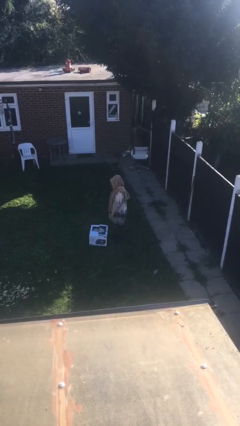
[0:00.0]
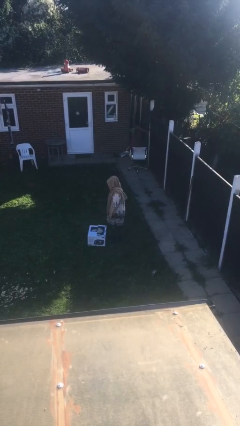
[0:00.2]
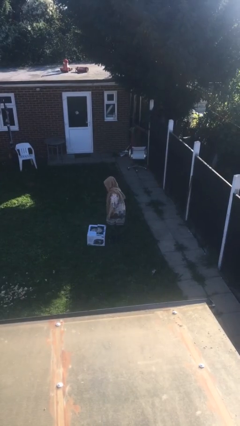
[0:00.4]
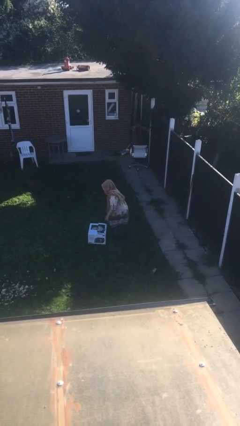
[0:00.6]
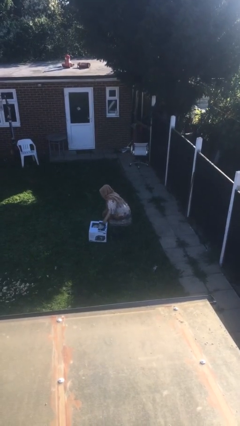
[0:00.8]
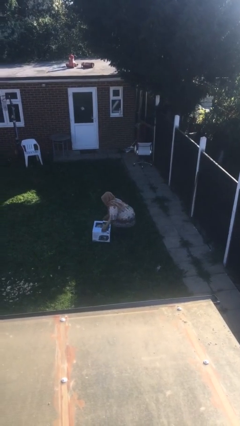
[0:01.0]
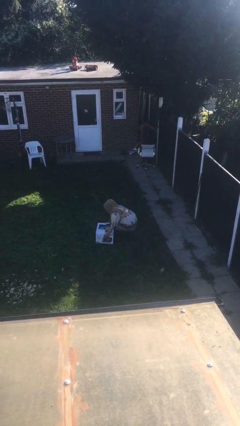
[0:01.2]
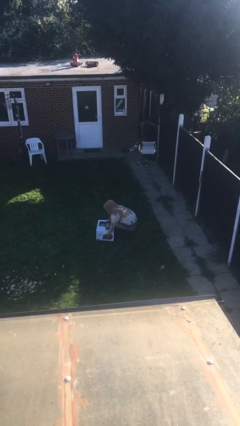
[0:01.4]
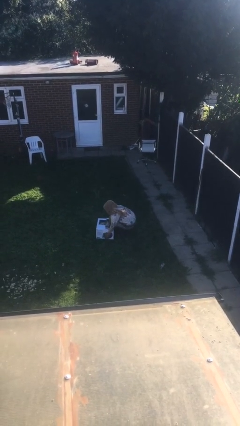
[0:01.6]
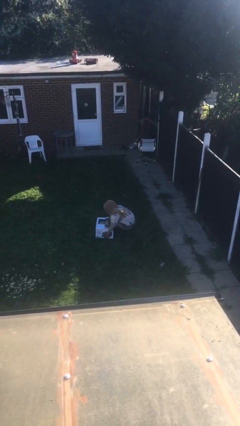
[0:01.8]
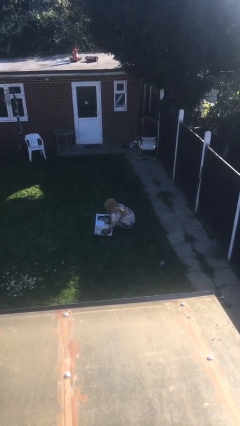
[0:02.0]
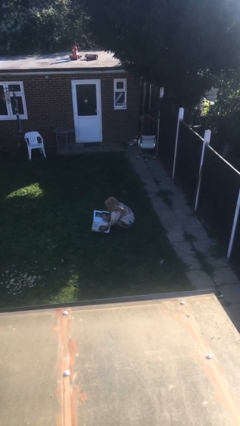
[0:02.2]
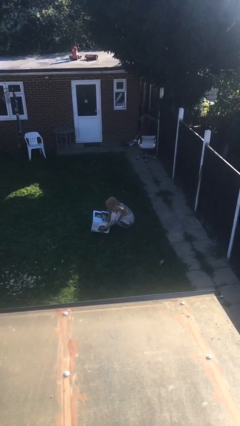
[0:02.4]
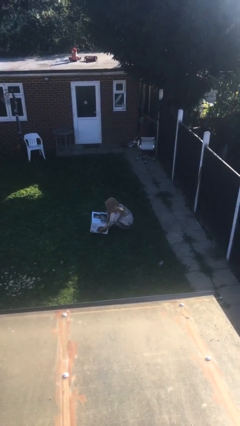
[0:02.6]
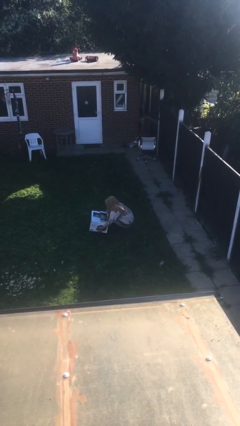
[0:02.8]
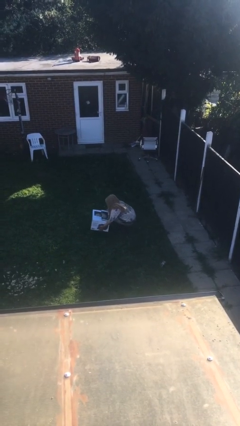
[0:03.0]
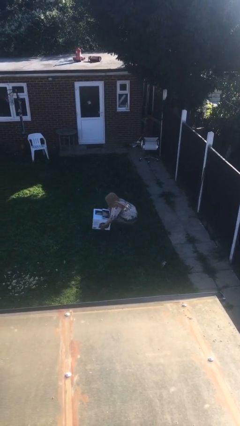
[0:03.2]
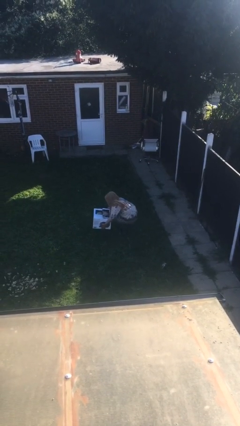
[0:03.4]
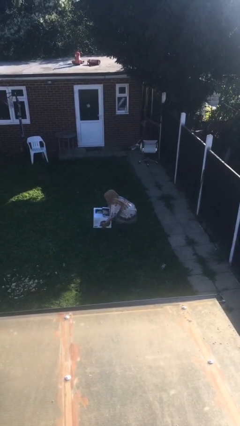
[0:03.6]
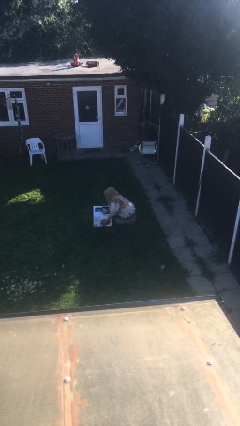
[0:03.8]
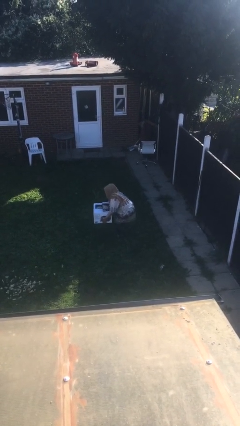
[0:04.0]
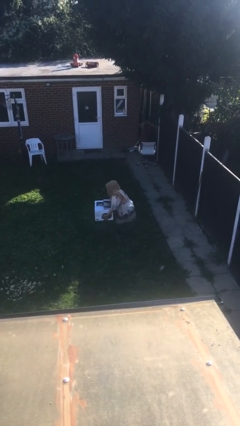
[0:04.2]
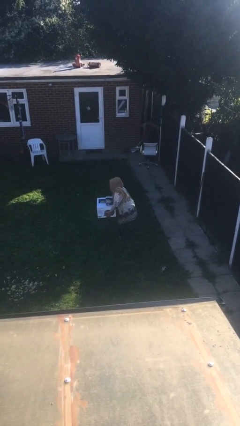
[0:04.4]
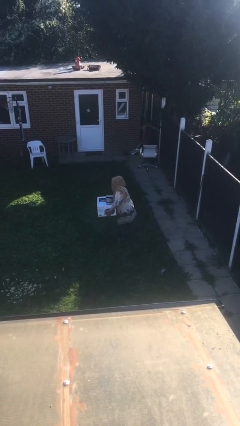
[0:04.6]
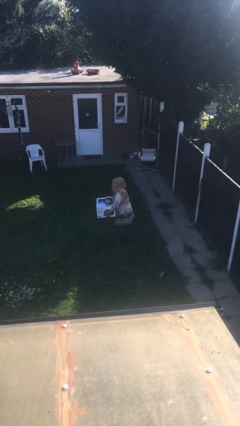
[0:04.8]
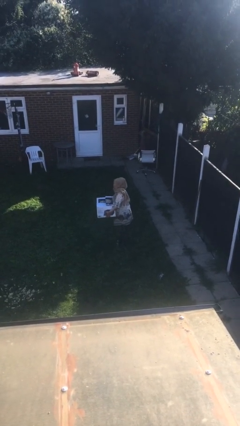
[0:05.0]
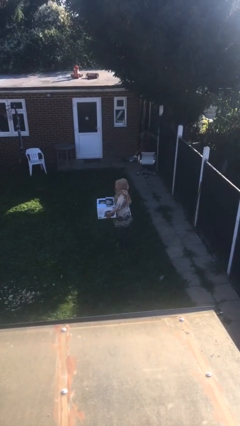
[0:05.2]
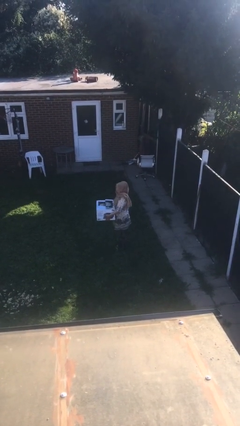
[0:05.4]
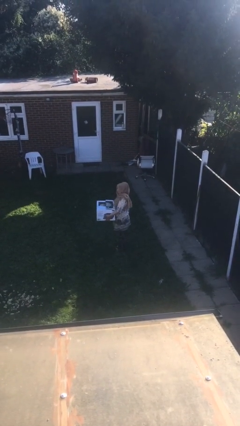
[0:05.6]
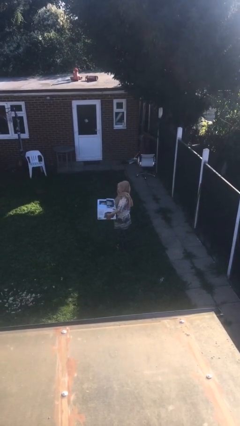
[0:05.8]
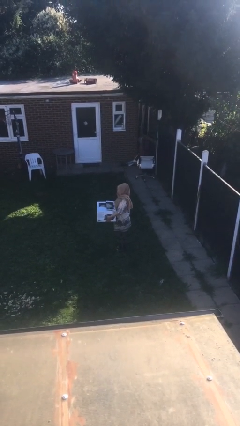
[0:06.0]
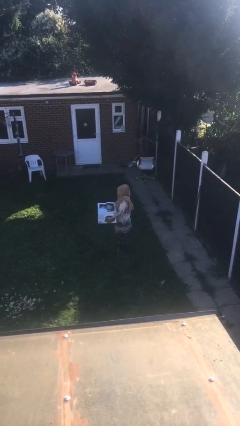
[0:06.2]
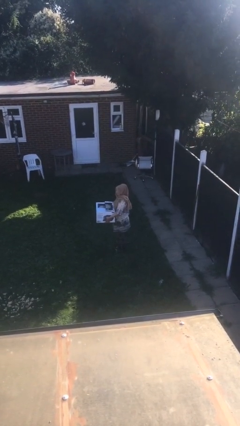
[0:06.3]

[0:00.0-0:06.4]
person picks up object from floor

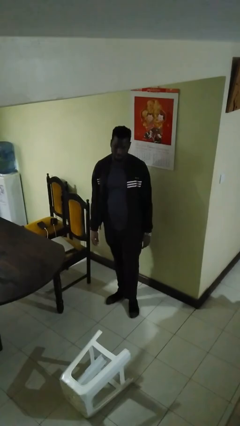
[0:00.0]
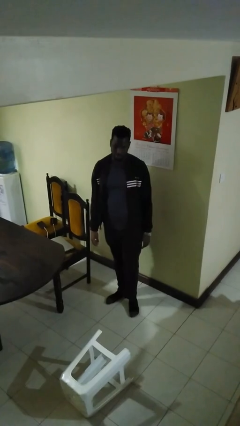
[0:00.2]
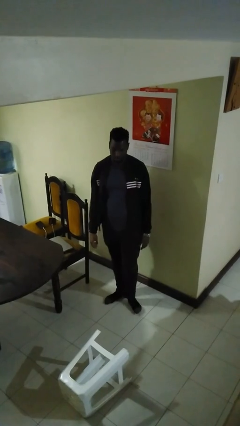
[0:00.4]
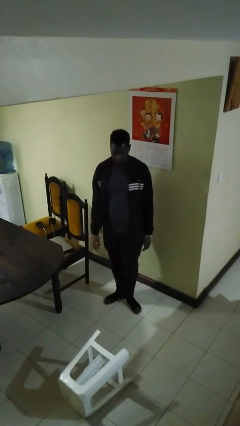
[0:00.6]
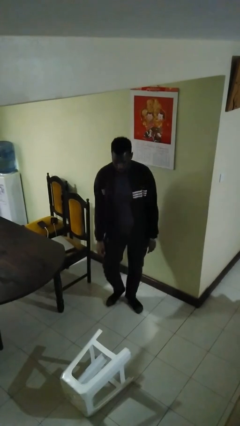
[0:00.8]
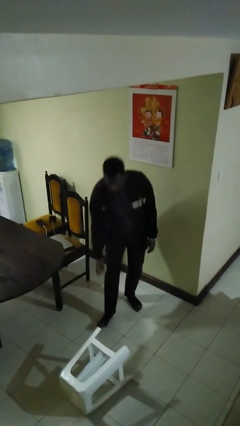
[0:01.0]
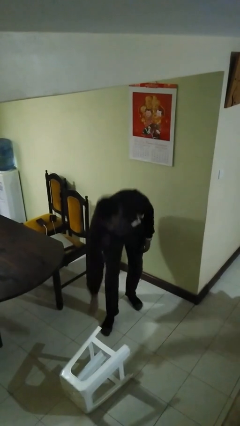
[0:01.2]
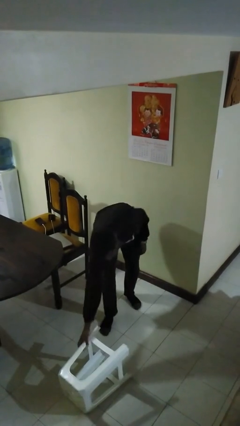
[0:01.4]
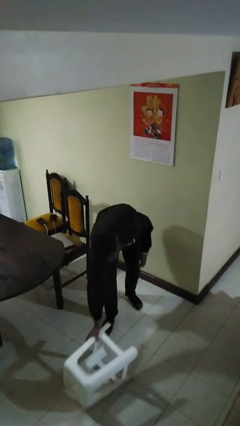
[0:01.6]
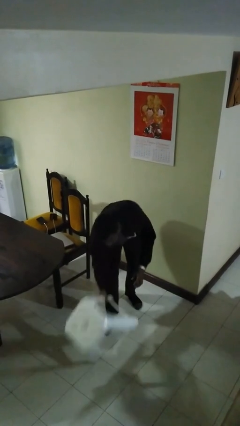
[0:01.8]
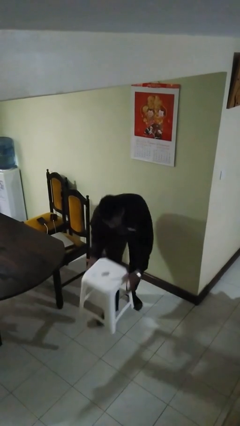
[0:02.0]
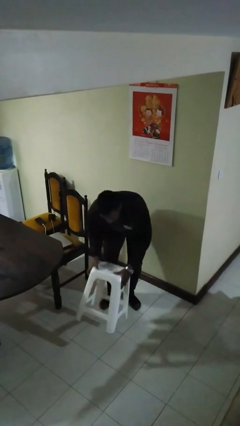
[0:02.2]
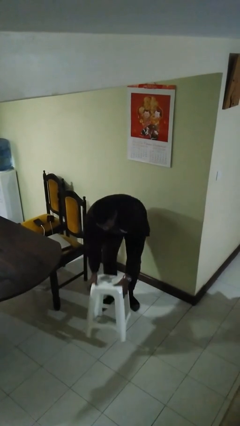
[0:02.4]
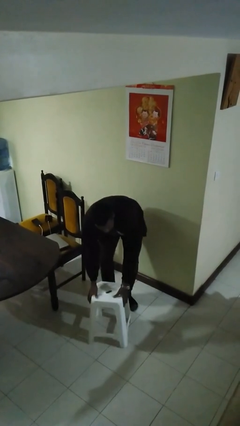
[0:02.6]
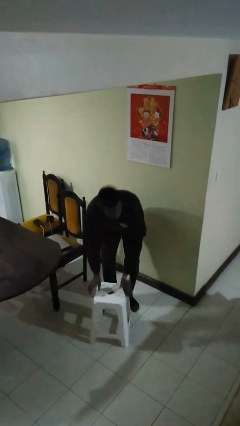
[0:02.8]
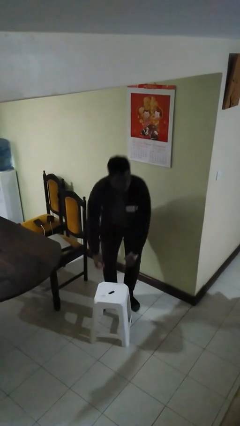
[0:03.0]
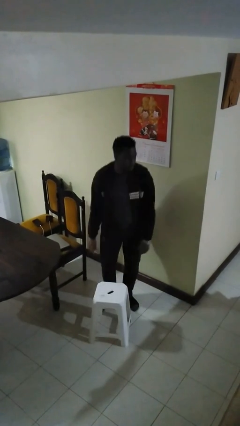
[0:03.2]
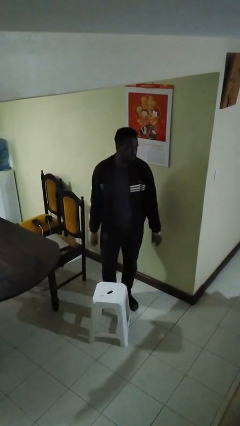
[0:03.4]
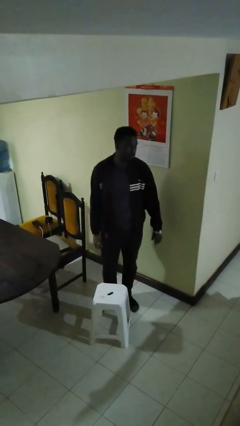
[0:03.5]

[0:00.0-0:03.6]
person sets upright furniture

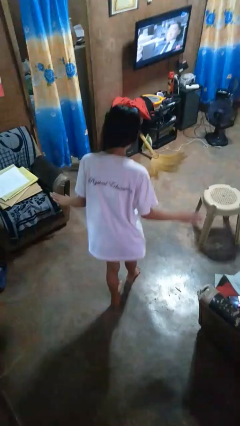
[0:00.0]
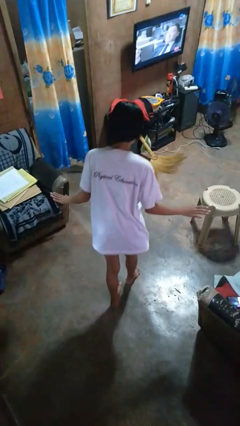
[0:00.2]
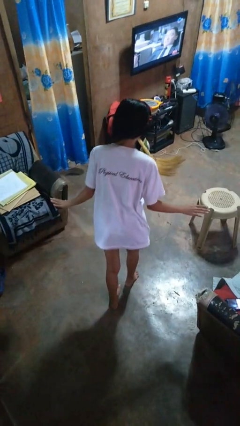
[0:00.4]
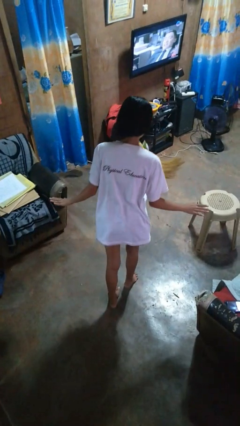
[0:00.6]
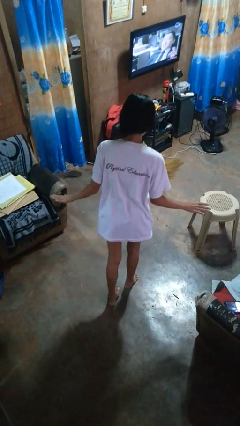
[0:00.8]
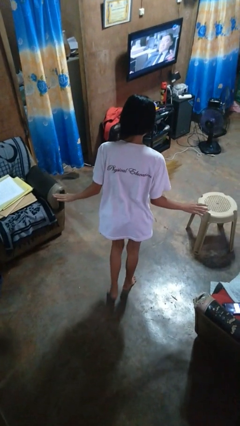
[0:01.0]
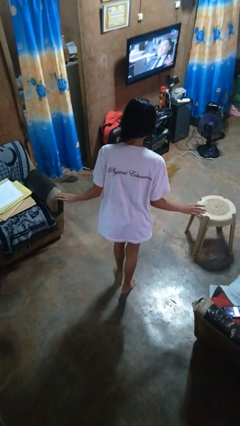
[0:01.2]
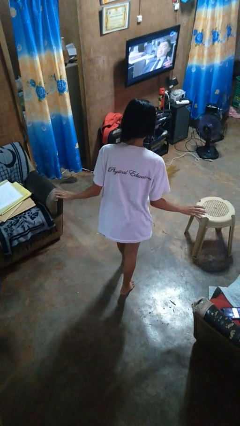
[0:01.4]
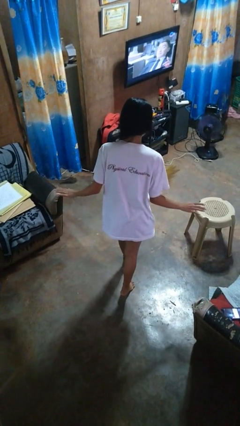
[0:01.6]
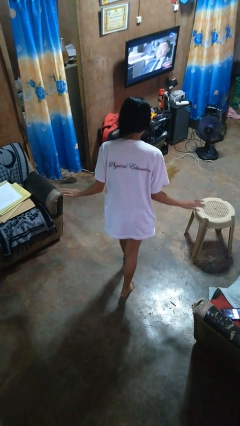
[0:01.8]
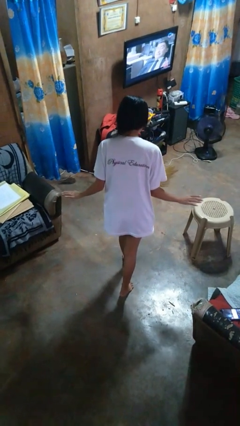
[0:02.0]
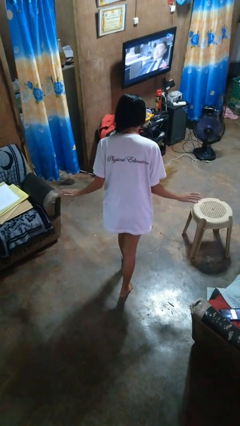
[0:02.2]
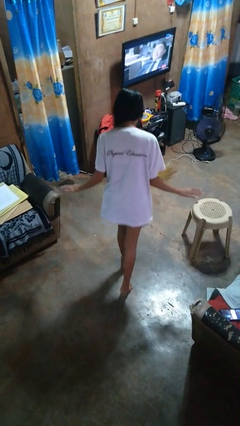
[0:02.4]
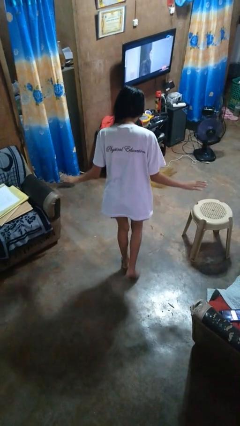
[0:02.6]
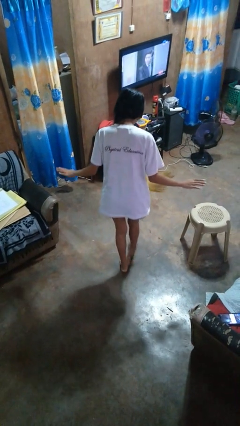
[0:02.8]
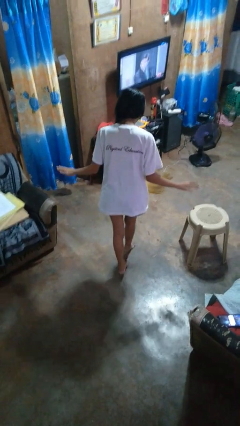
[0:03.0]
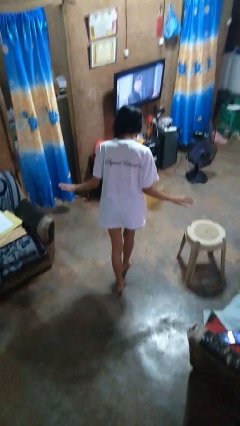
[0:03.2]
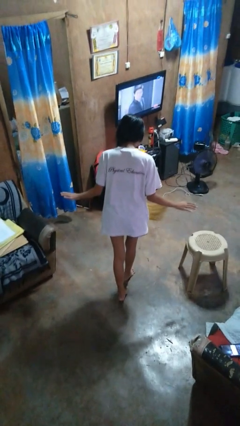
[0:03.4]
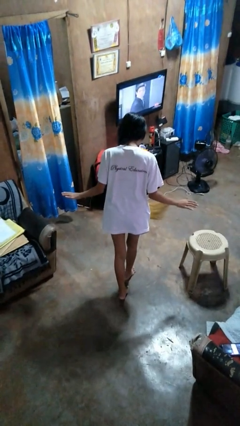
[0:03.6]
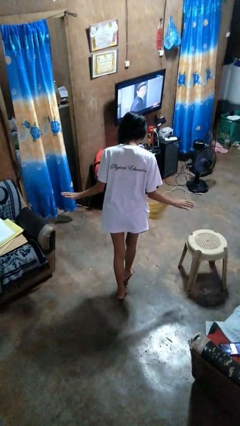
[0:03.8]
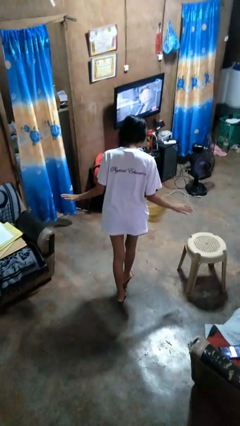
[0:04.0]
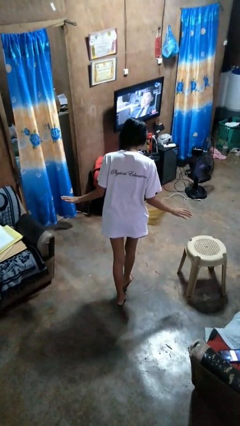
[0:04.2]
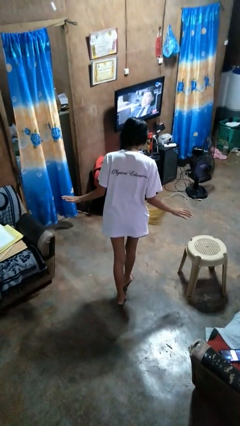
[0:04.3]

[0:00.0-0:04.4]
person walks tiptoe

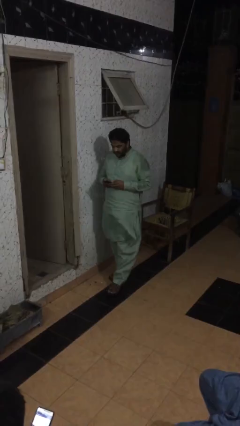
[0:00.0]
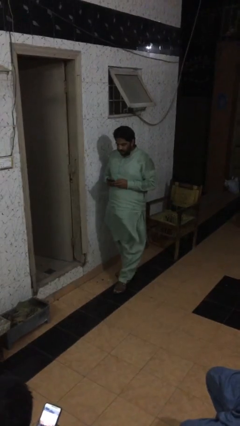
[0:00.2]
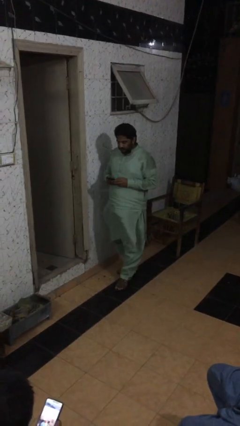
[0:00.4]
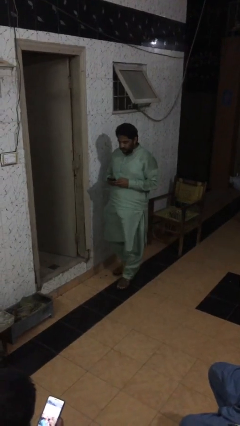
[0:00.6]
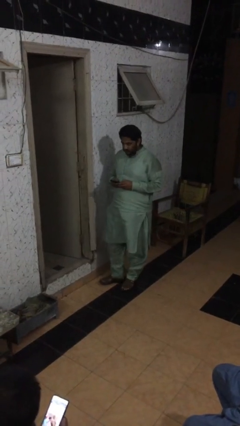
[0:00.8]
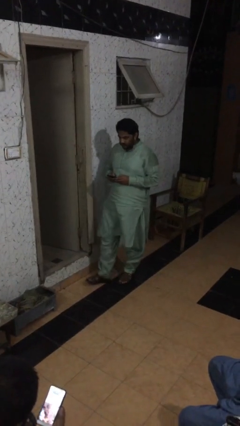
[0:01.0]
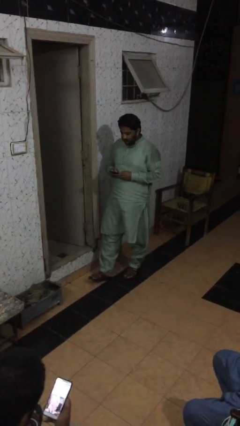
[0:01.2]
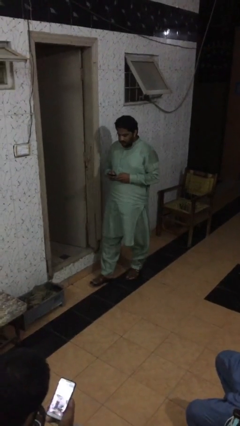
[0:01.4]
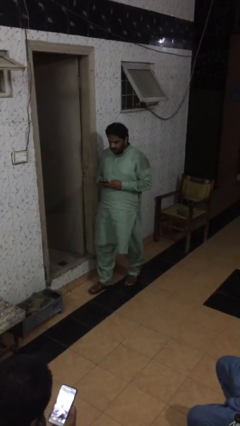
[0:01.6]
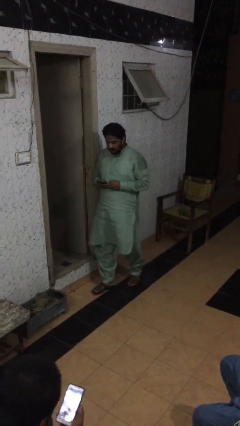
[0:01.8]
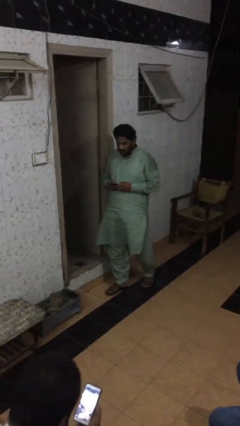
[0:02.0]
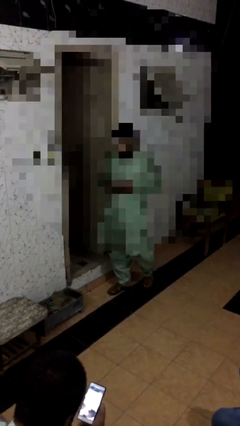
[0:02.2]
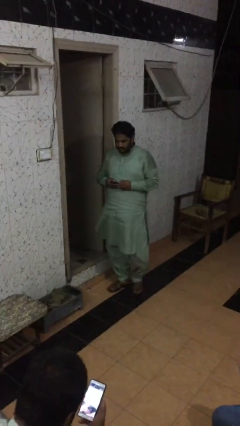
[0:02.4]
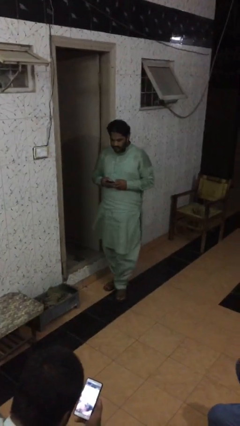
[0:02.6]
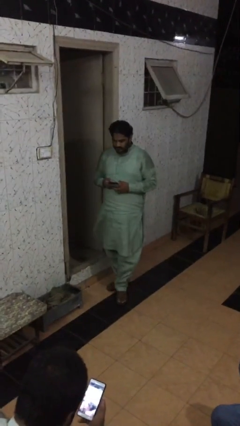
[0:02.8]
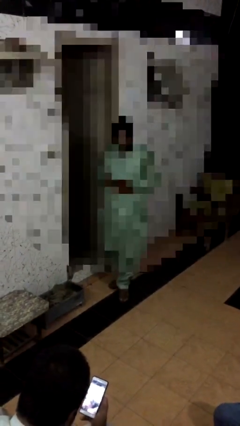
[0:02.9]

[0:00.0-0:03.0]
person talks on phone

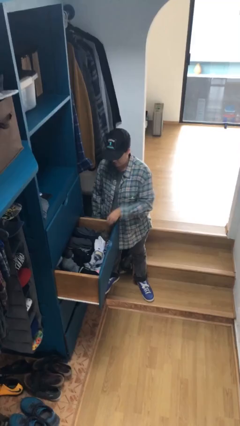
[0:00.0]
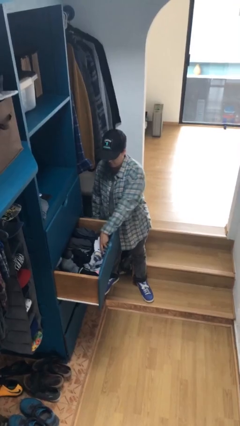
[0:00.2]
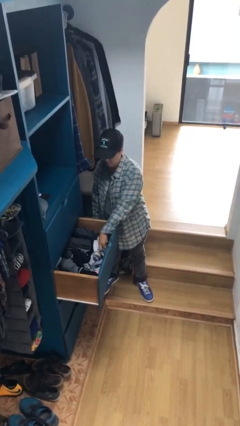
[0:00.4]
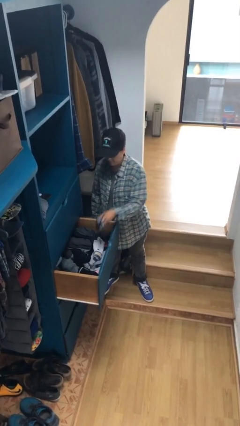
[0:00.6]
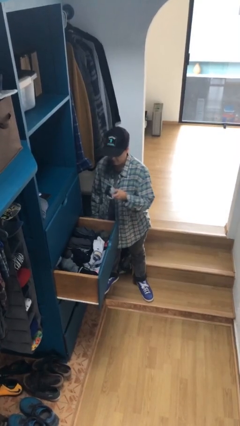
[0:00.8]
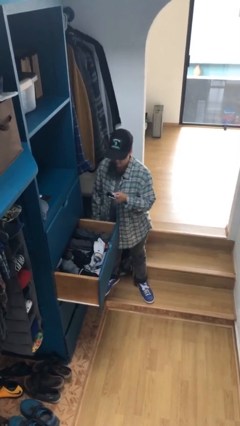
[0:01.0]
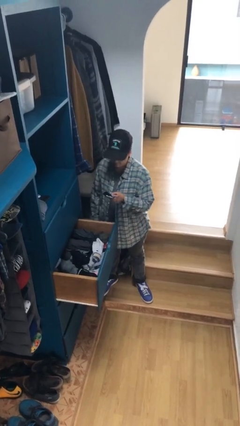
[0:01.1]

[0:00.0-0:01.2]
person takes clothes from dresser
